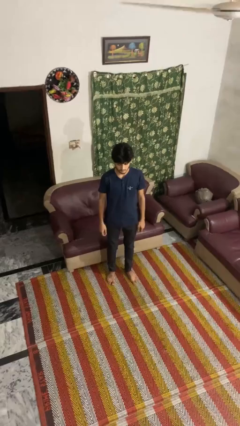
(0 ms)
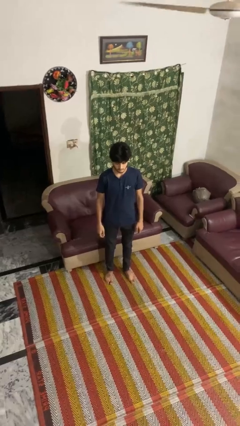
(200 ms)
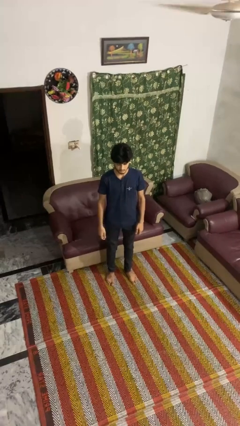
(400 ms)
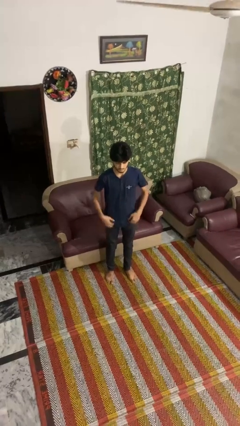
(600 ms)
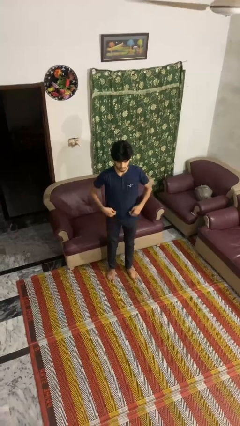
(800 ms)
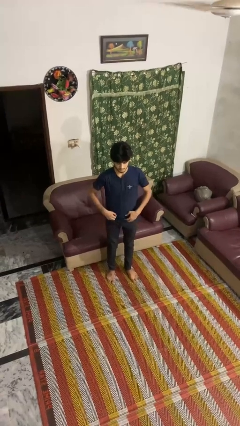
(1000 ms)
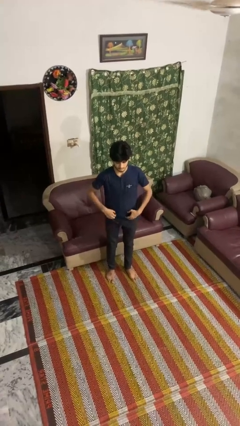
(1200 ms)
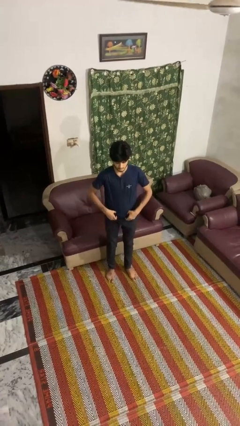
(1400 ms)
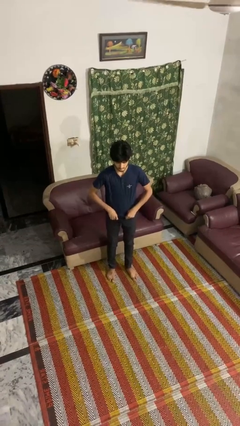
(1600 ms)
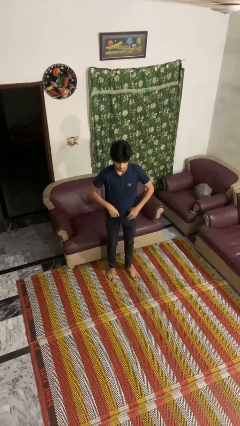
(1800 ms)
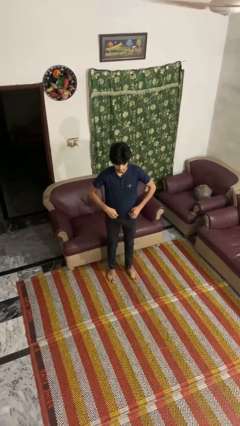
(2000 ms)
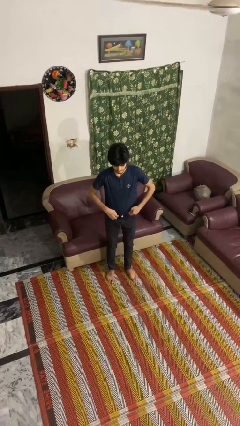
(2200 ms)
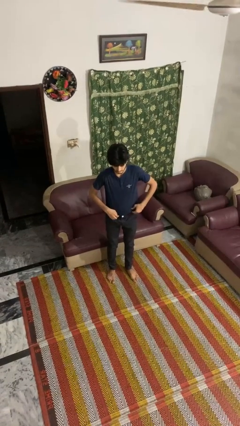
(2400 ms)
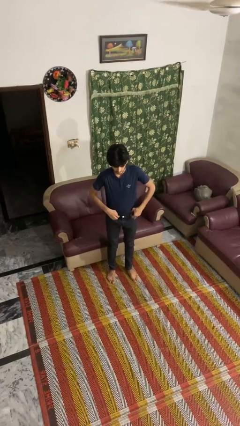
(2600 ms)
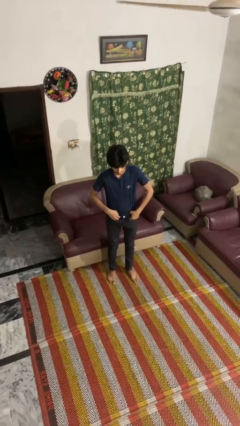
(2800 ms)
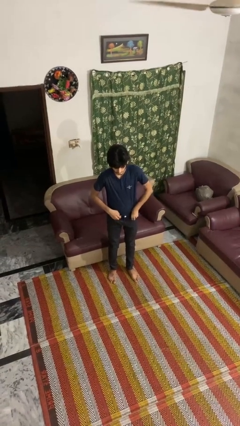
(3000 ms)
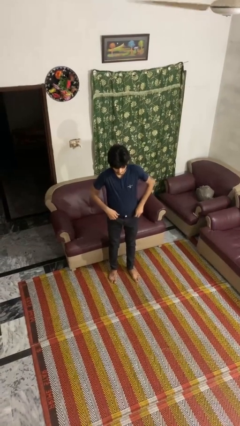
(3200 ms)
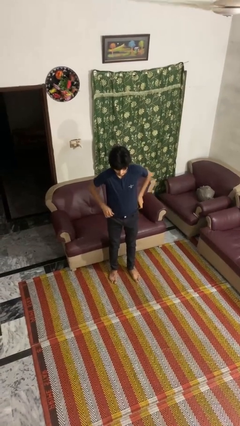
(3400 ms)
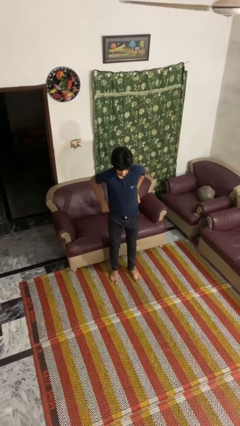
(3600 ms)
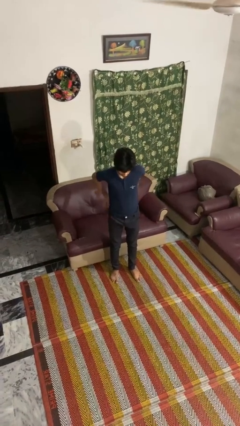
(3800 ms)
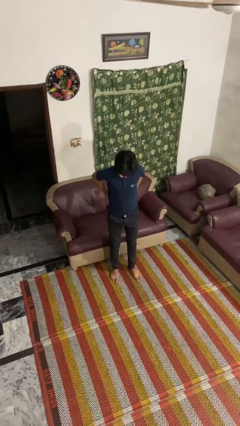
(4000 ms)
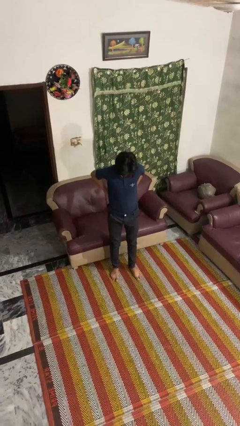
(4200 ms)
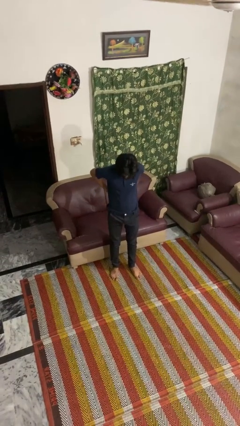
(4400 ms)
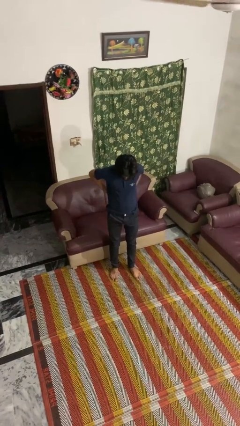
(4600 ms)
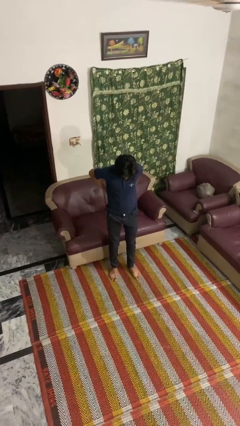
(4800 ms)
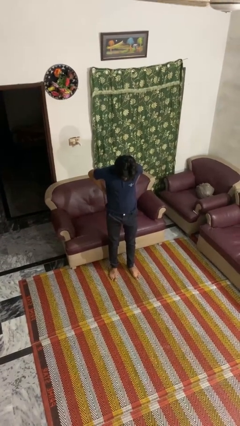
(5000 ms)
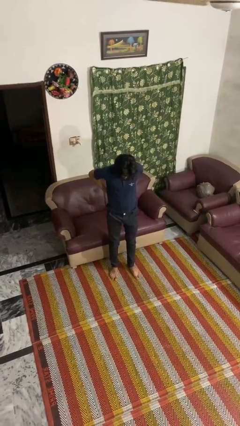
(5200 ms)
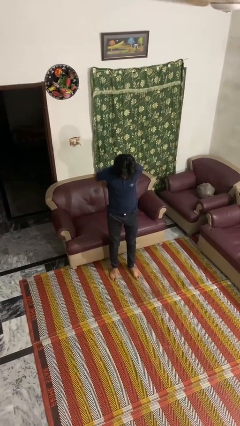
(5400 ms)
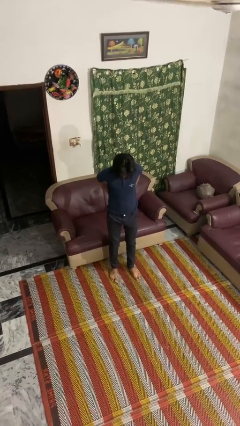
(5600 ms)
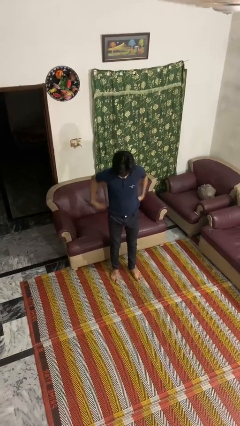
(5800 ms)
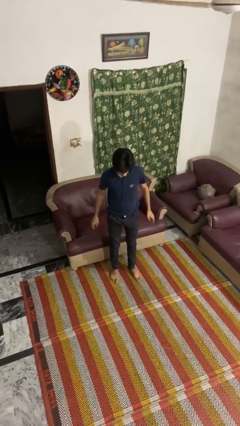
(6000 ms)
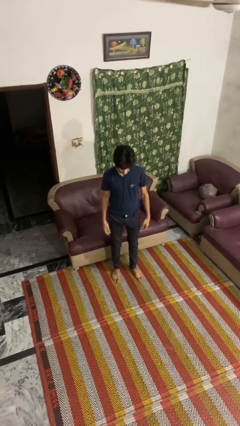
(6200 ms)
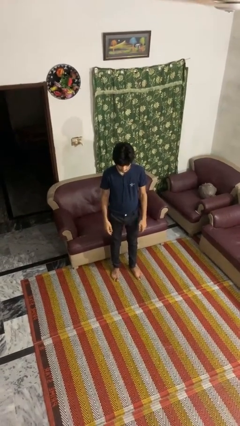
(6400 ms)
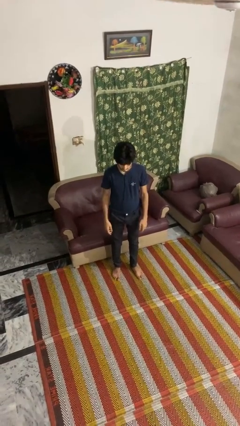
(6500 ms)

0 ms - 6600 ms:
person tucks in shirt

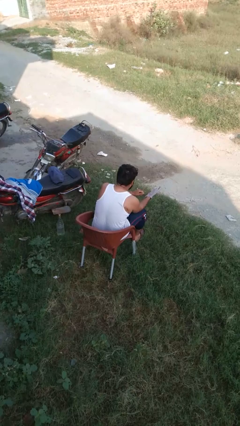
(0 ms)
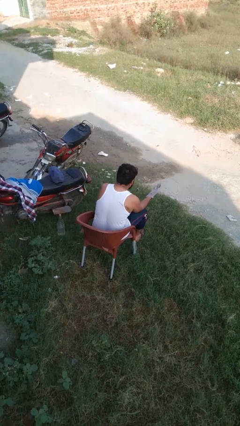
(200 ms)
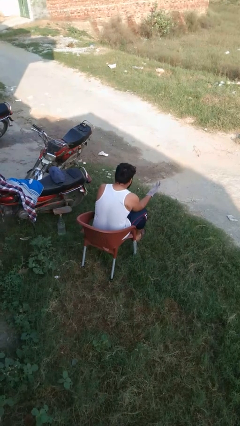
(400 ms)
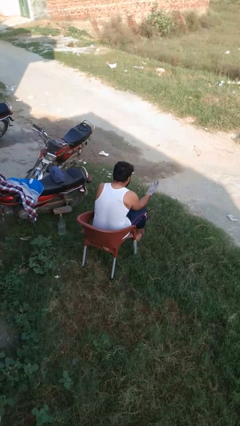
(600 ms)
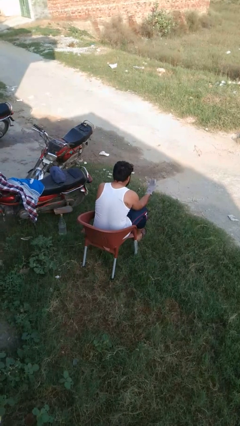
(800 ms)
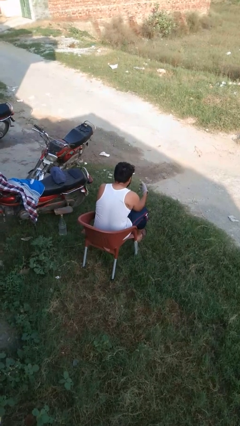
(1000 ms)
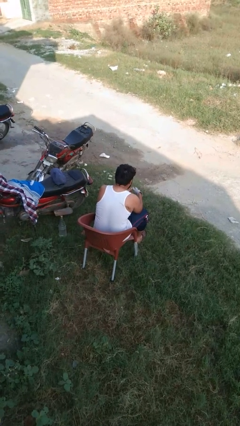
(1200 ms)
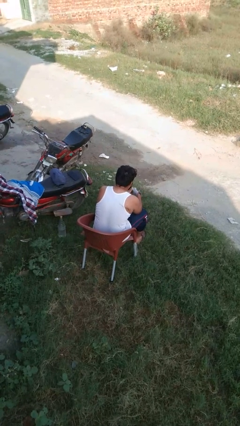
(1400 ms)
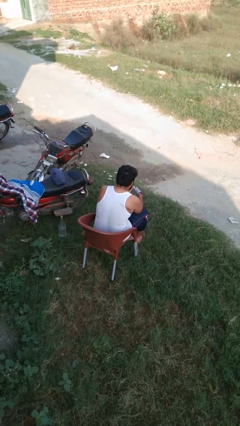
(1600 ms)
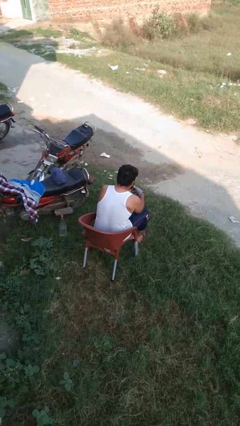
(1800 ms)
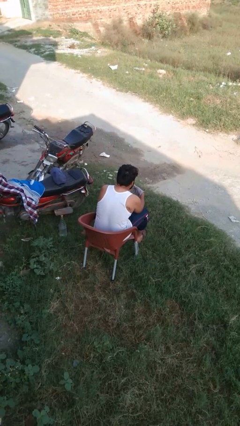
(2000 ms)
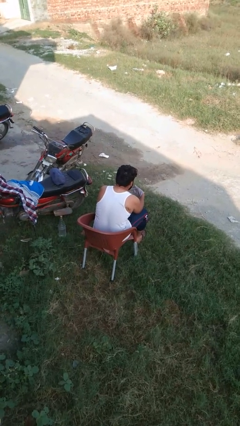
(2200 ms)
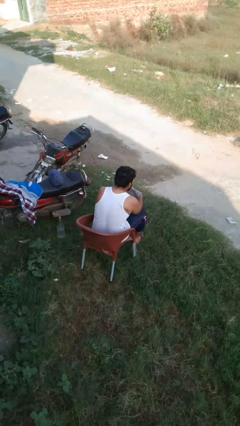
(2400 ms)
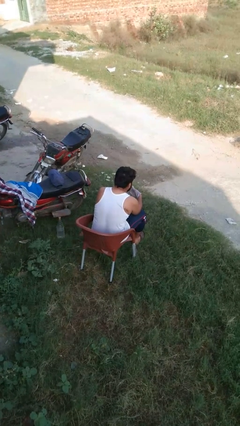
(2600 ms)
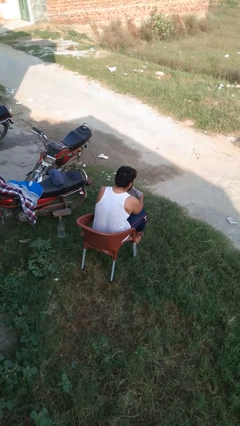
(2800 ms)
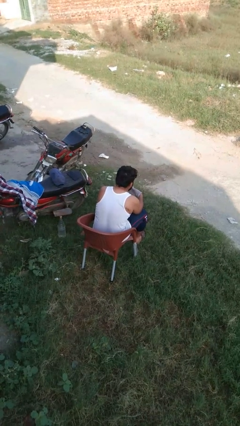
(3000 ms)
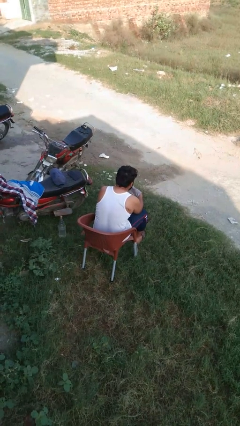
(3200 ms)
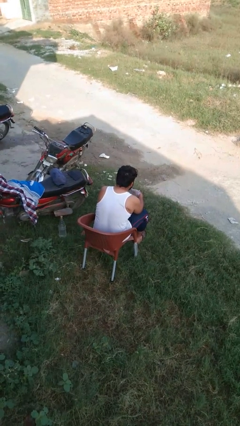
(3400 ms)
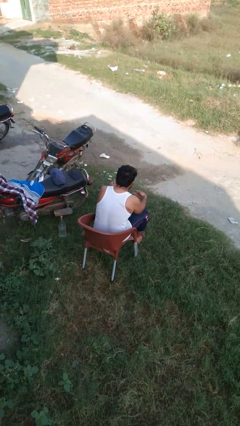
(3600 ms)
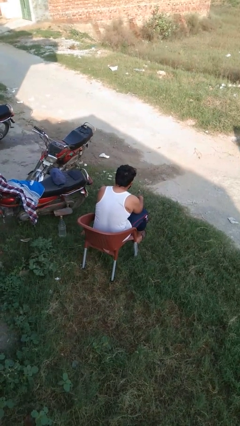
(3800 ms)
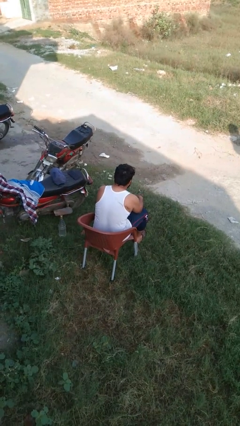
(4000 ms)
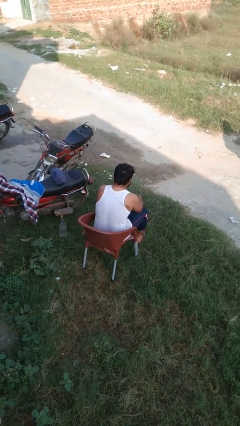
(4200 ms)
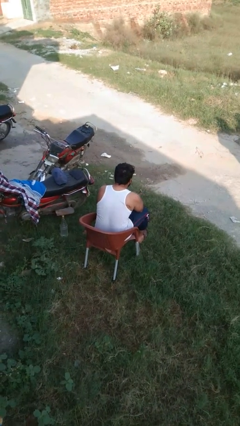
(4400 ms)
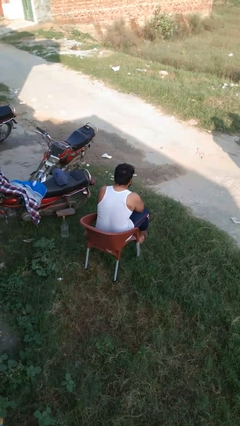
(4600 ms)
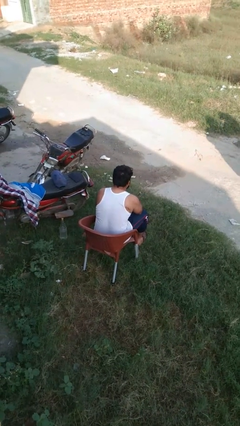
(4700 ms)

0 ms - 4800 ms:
person takes off gloves

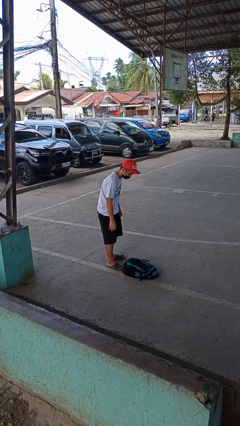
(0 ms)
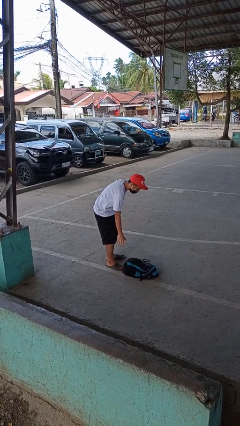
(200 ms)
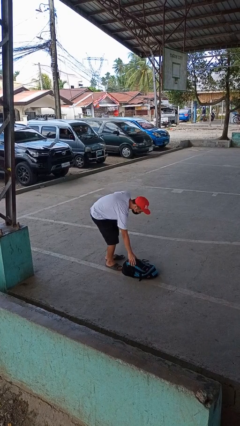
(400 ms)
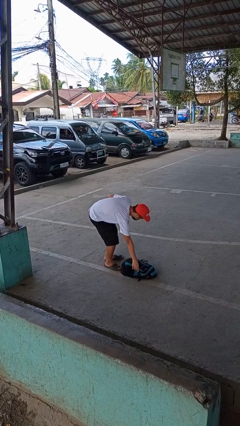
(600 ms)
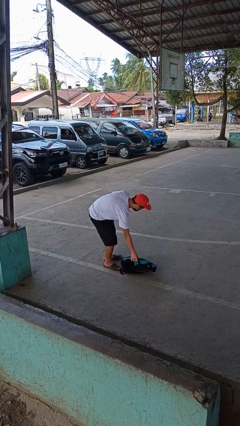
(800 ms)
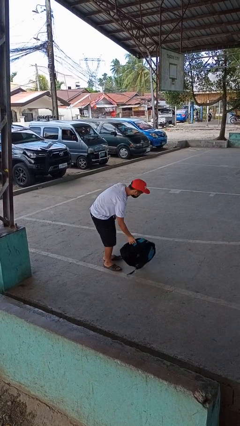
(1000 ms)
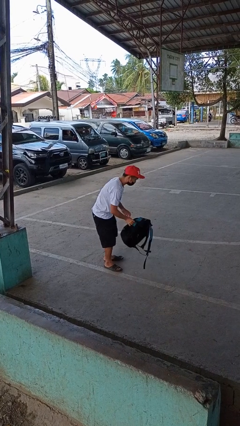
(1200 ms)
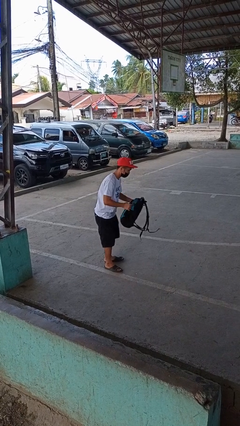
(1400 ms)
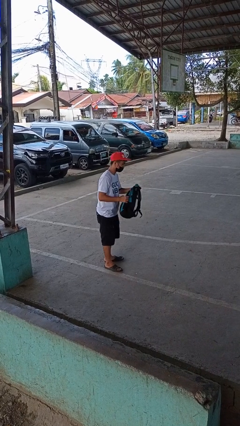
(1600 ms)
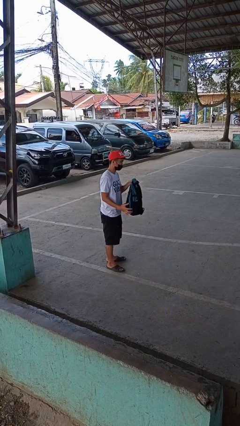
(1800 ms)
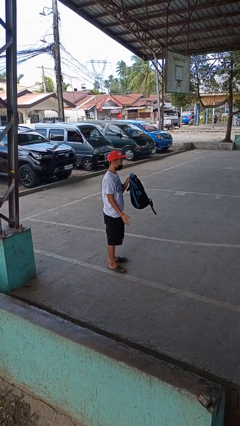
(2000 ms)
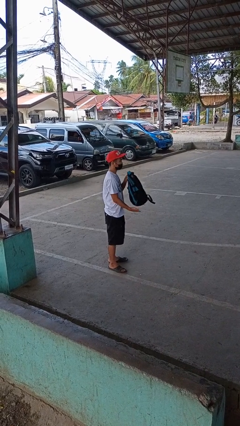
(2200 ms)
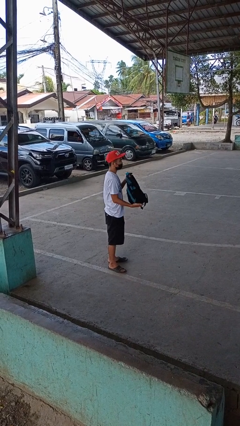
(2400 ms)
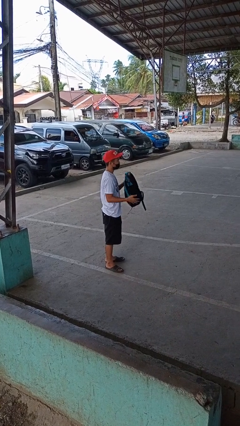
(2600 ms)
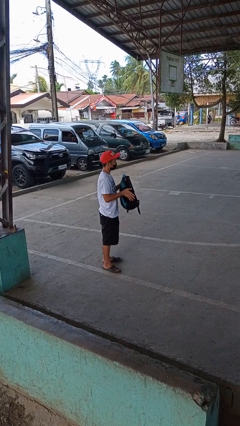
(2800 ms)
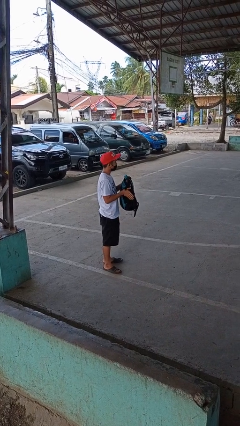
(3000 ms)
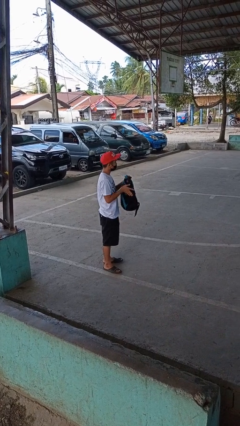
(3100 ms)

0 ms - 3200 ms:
person picks up object from floor

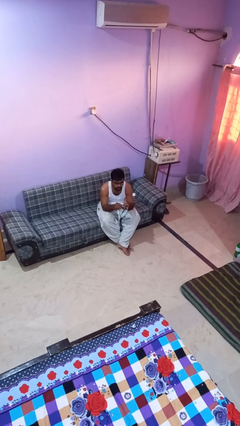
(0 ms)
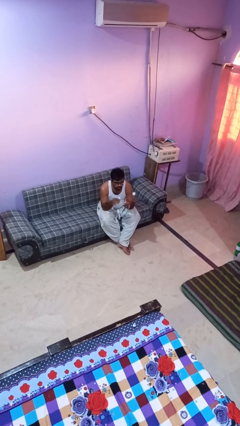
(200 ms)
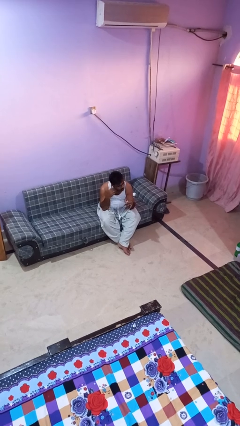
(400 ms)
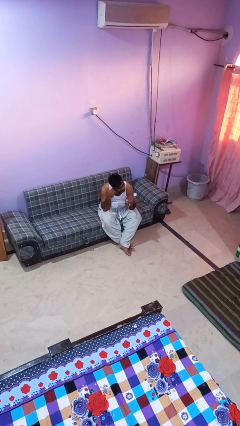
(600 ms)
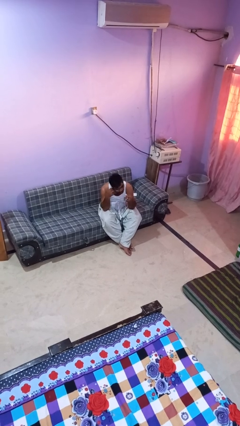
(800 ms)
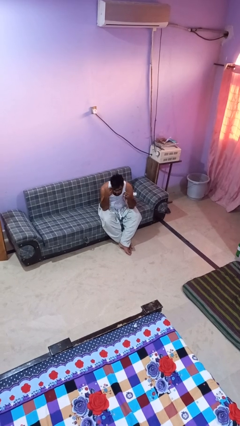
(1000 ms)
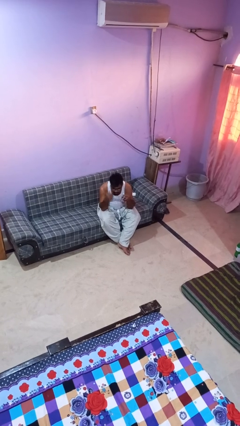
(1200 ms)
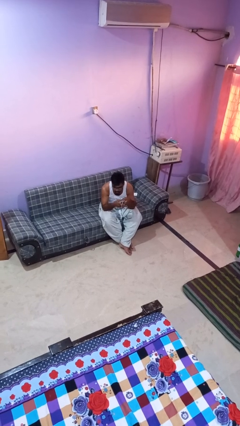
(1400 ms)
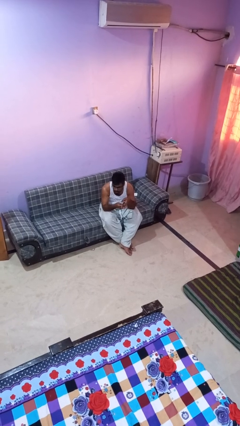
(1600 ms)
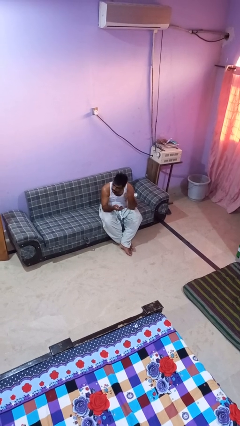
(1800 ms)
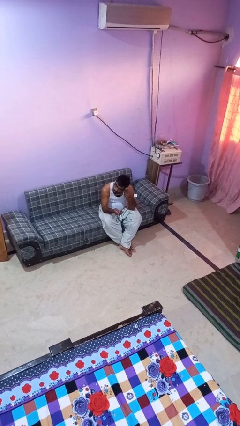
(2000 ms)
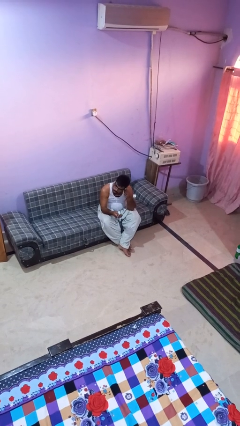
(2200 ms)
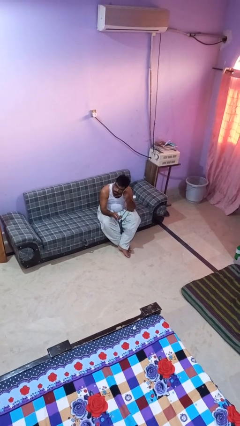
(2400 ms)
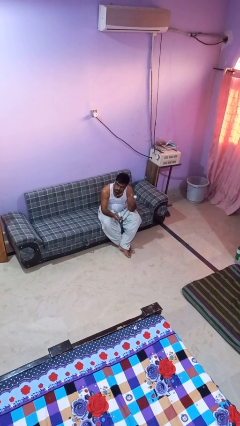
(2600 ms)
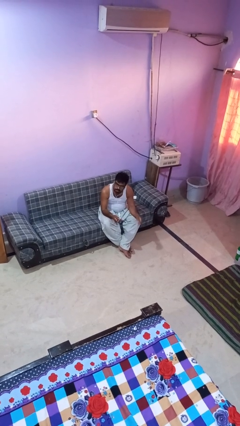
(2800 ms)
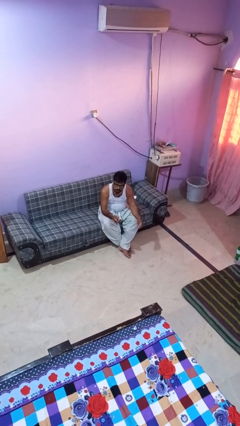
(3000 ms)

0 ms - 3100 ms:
person puts on headphones
